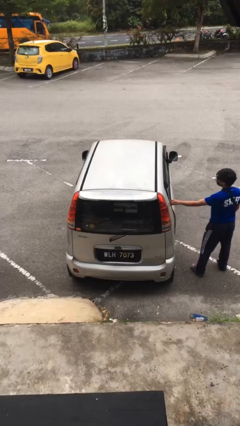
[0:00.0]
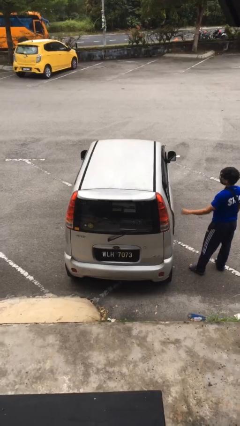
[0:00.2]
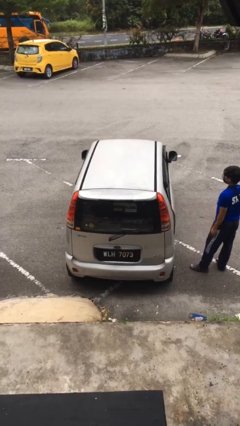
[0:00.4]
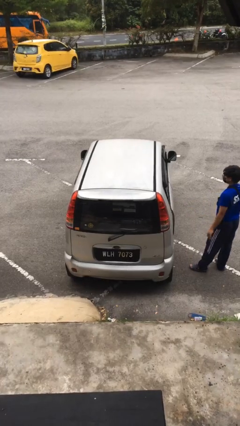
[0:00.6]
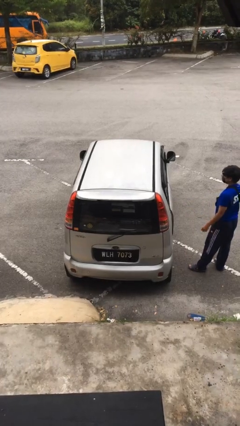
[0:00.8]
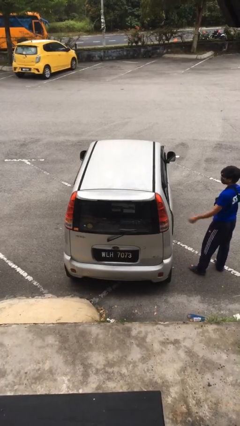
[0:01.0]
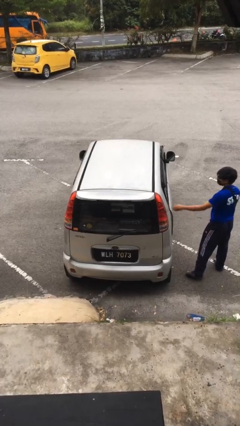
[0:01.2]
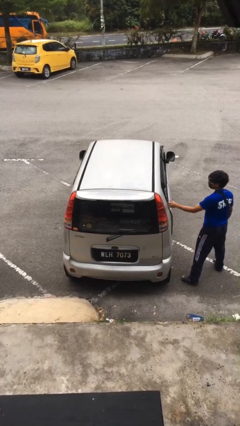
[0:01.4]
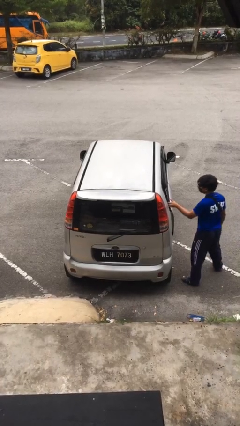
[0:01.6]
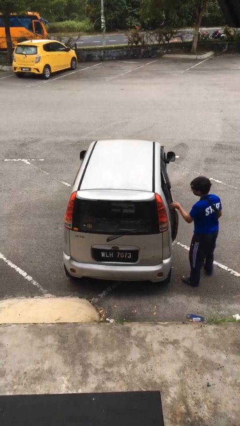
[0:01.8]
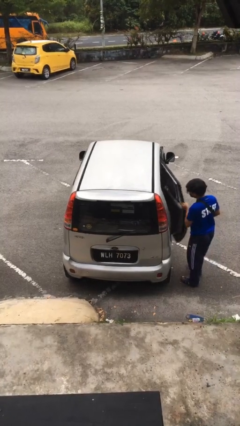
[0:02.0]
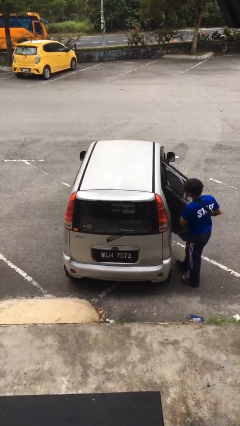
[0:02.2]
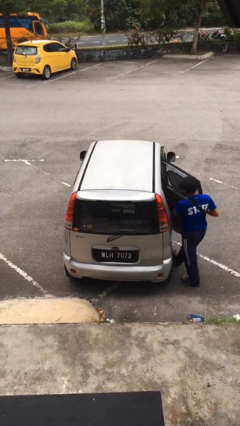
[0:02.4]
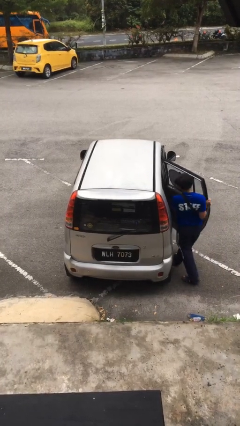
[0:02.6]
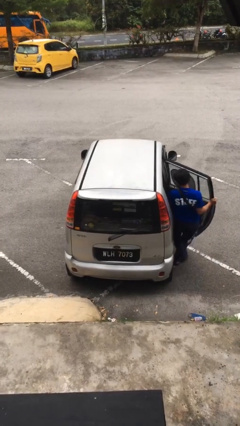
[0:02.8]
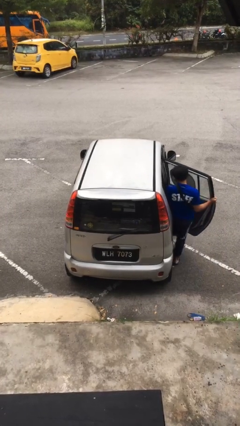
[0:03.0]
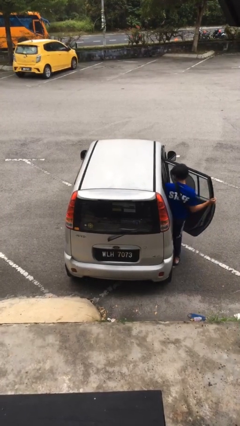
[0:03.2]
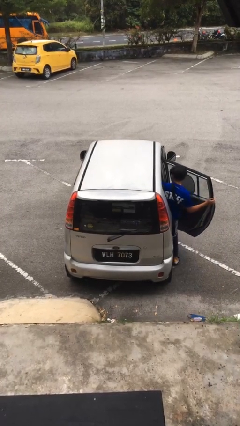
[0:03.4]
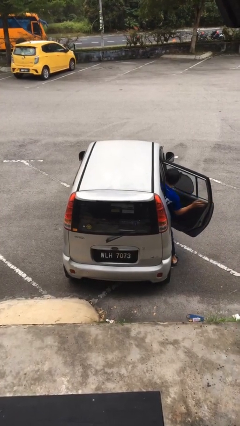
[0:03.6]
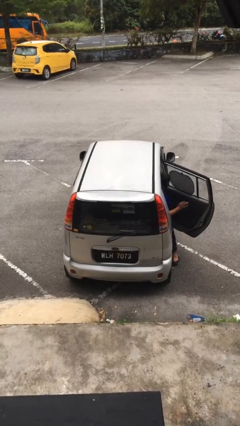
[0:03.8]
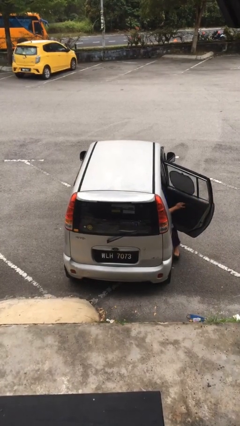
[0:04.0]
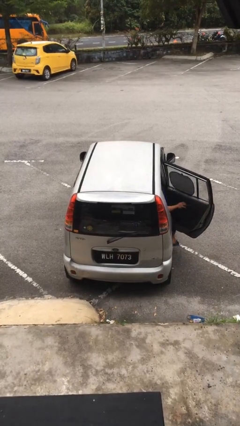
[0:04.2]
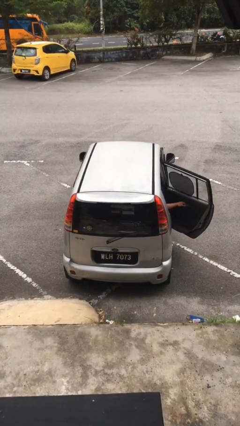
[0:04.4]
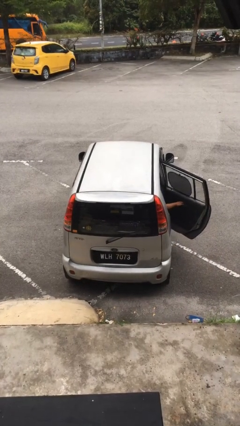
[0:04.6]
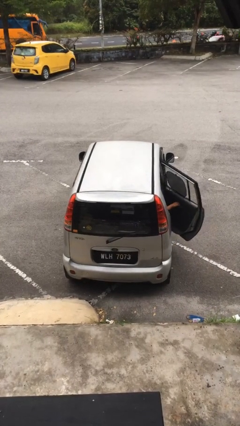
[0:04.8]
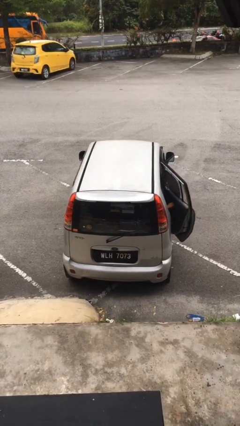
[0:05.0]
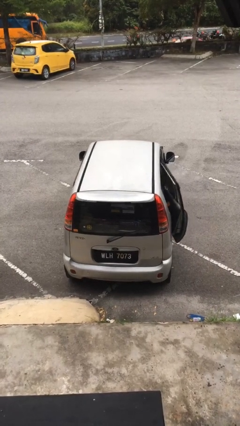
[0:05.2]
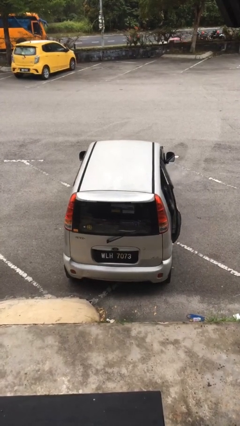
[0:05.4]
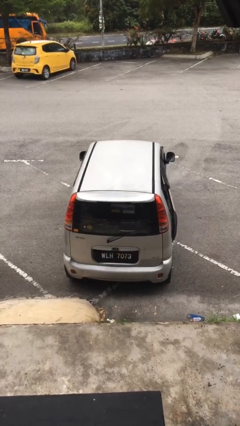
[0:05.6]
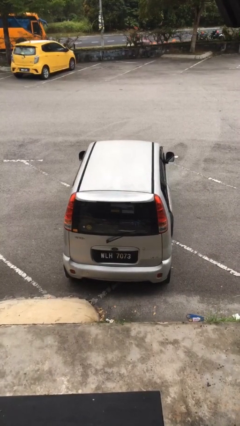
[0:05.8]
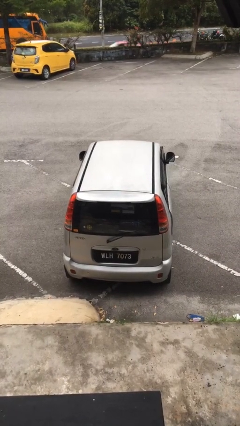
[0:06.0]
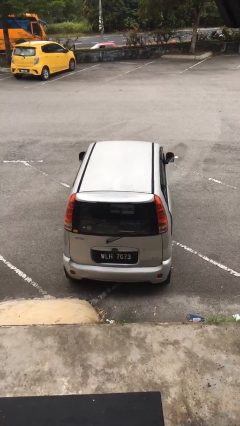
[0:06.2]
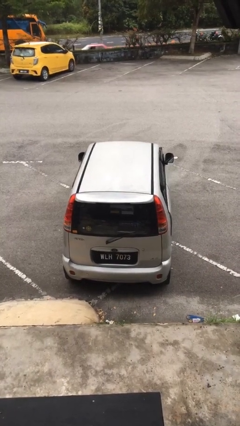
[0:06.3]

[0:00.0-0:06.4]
car picks up person

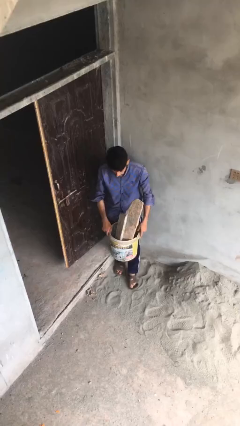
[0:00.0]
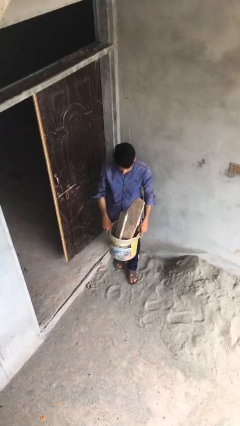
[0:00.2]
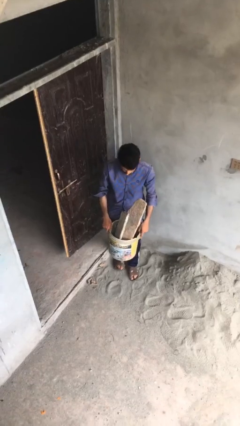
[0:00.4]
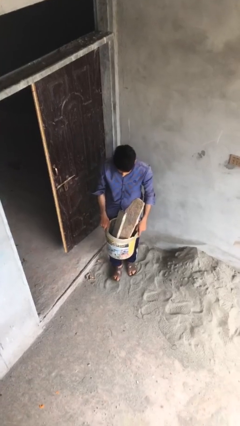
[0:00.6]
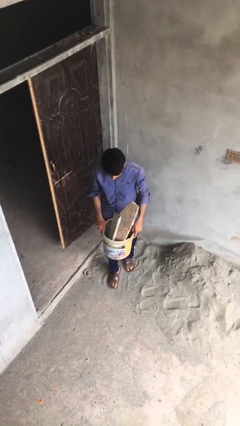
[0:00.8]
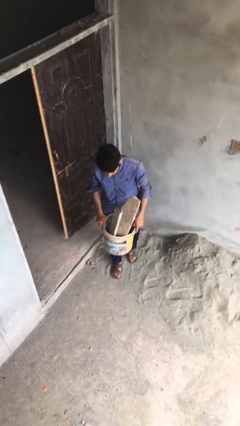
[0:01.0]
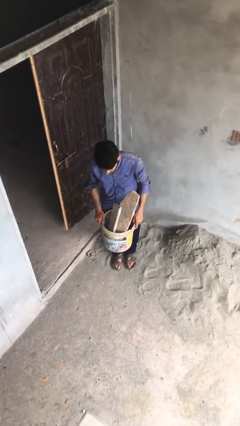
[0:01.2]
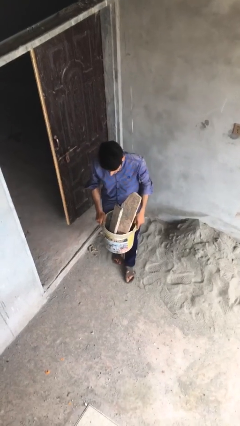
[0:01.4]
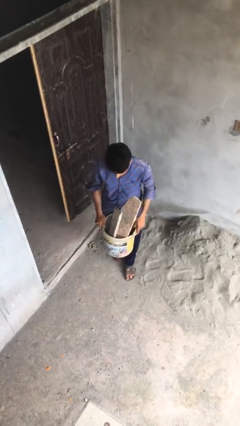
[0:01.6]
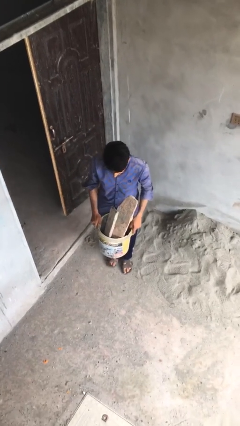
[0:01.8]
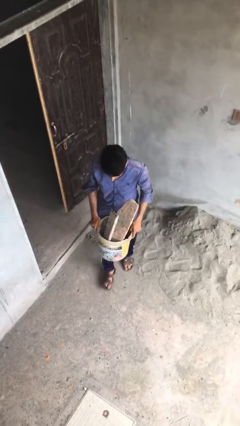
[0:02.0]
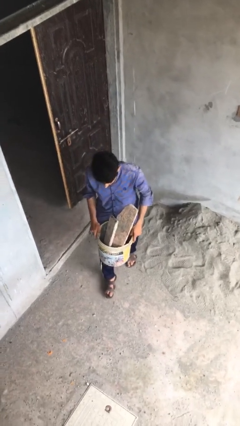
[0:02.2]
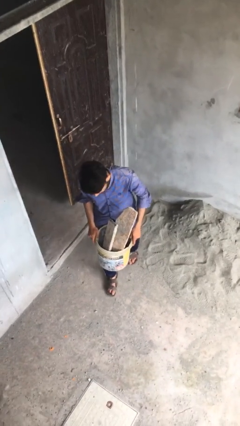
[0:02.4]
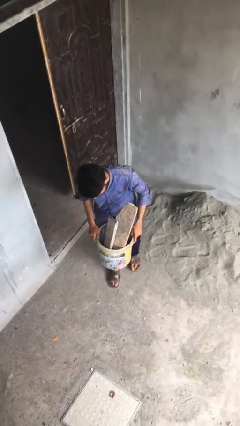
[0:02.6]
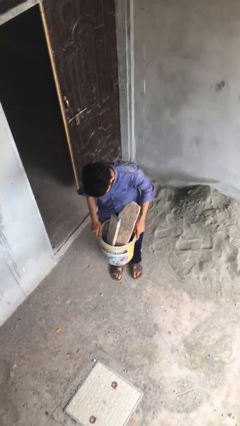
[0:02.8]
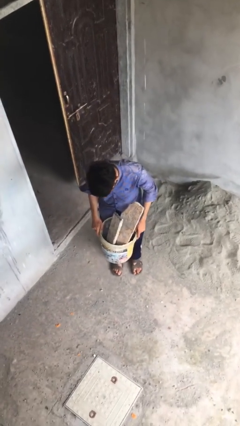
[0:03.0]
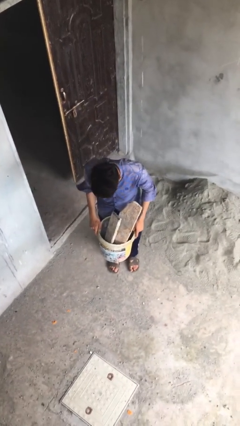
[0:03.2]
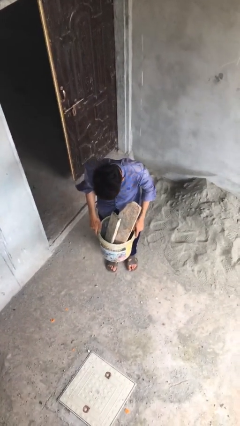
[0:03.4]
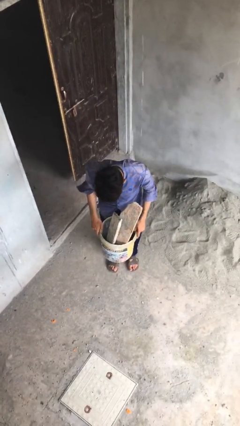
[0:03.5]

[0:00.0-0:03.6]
person carries heavy object

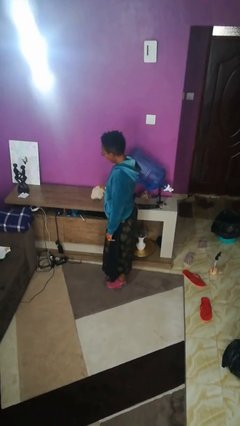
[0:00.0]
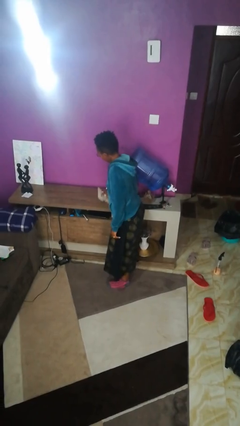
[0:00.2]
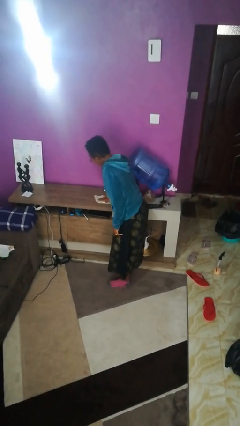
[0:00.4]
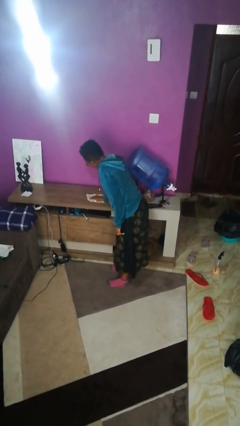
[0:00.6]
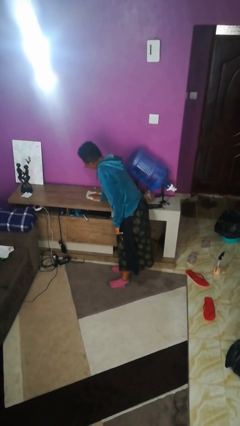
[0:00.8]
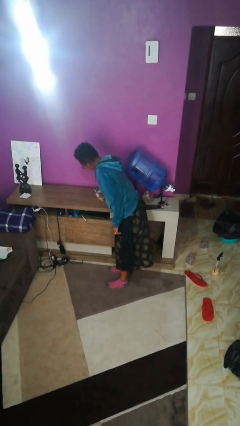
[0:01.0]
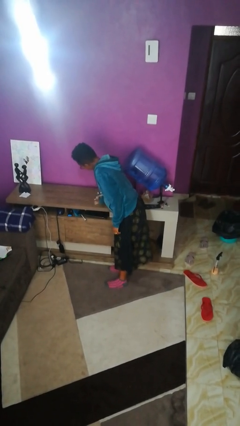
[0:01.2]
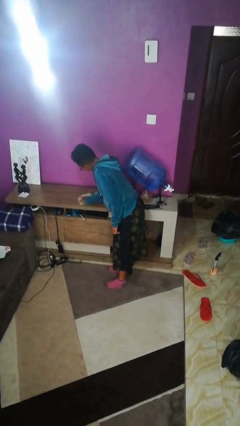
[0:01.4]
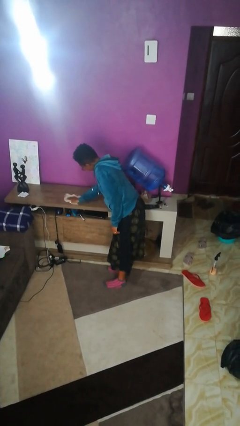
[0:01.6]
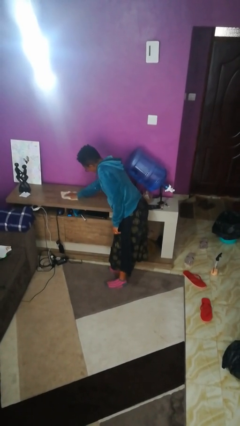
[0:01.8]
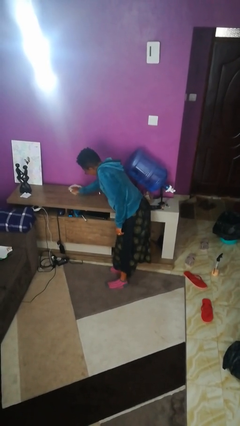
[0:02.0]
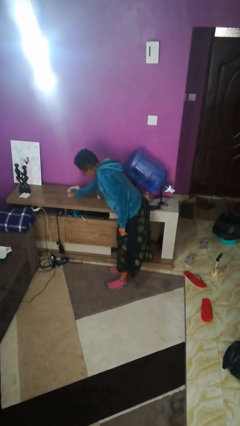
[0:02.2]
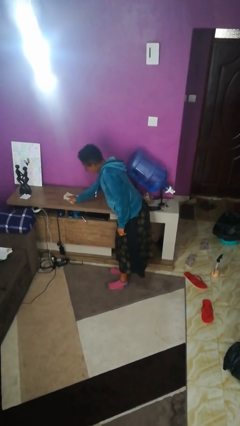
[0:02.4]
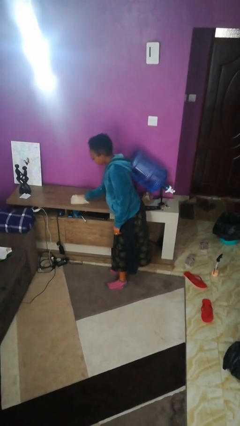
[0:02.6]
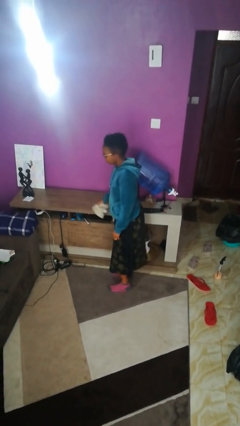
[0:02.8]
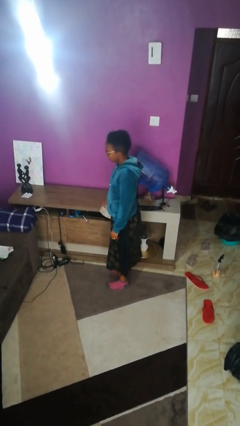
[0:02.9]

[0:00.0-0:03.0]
person cleans table with rag

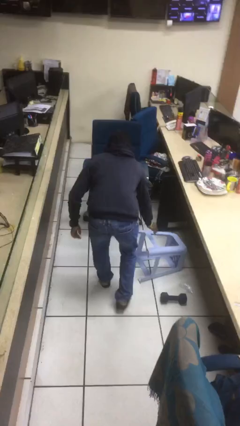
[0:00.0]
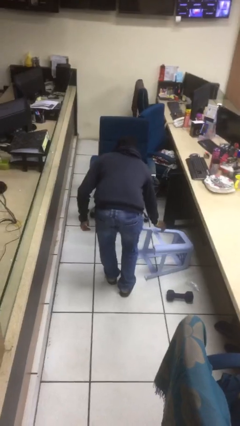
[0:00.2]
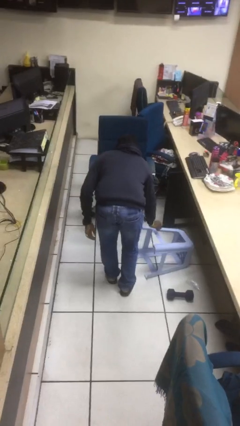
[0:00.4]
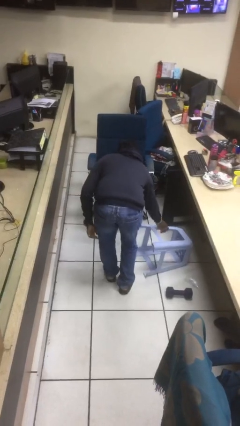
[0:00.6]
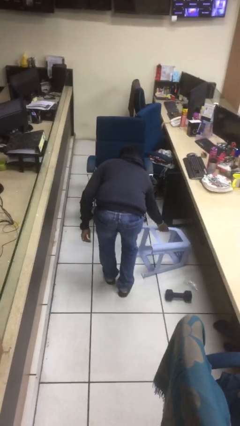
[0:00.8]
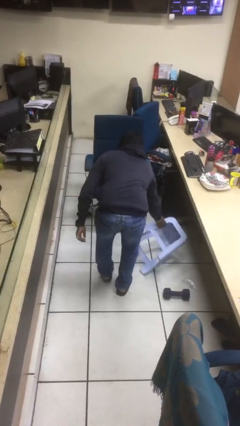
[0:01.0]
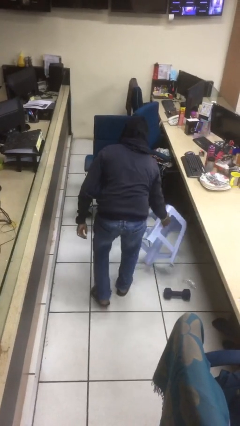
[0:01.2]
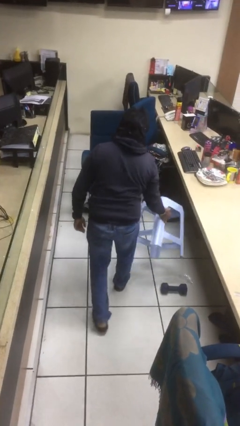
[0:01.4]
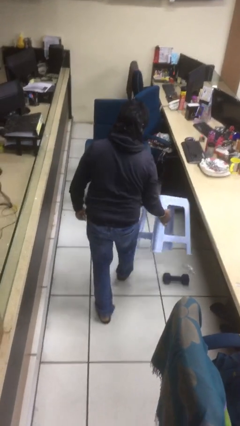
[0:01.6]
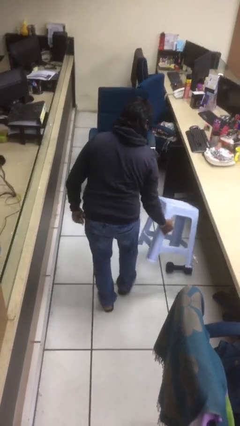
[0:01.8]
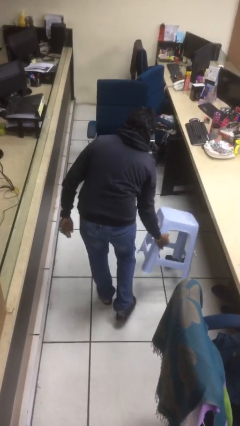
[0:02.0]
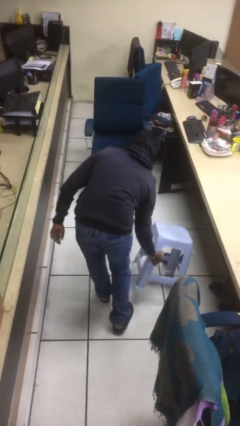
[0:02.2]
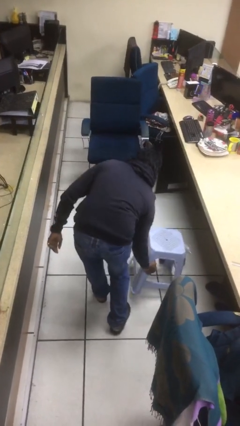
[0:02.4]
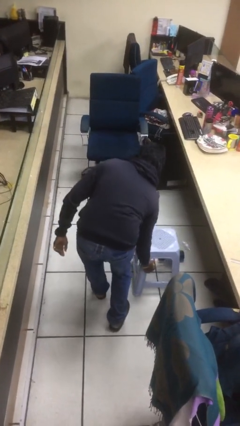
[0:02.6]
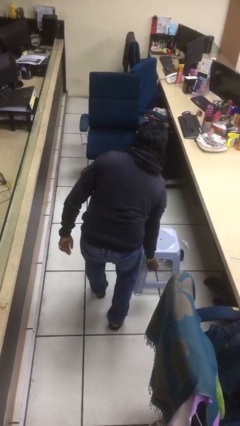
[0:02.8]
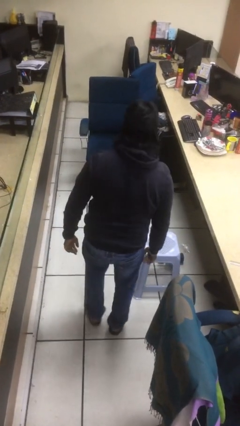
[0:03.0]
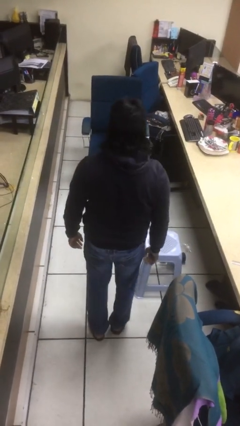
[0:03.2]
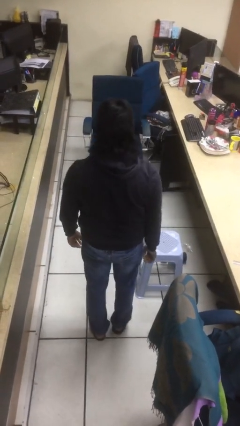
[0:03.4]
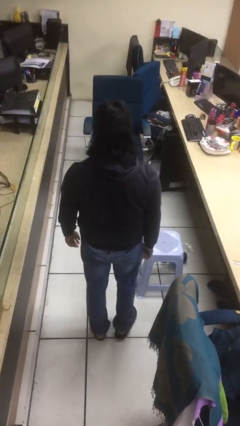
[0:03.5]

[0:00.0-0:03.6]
person sets upright furniture

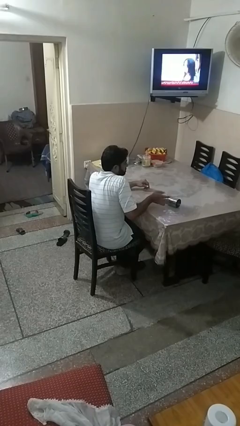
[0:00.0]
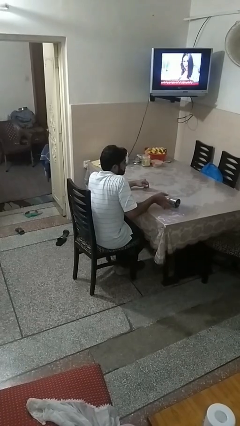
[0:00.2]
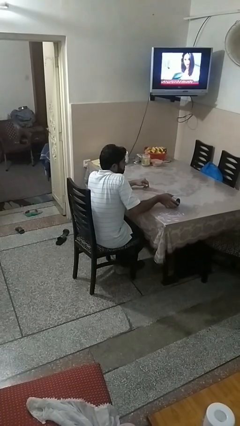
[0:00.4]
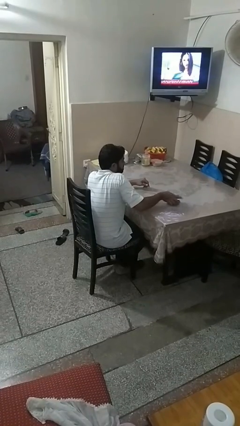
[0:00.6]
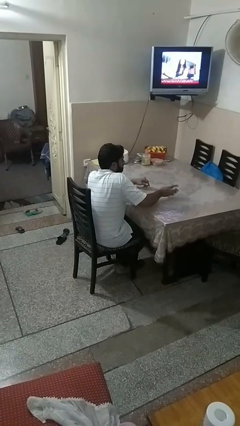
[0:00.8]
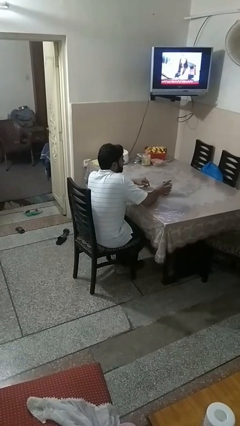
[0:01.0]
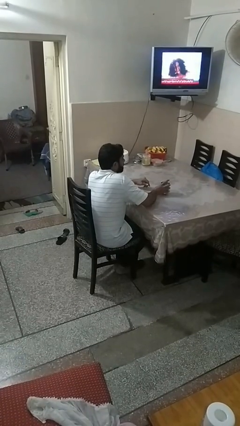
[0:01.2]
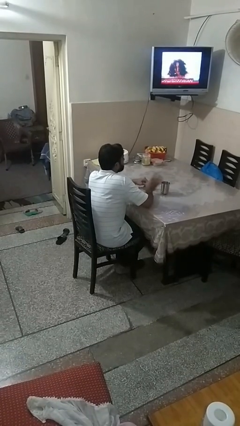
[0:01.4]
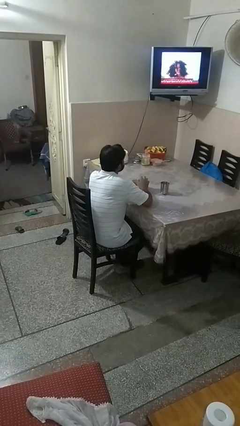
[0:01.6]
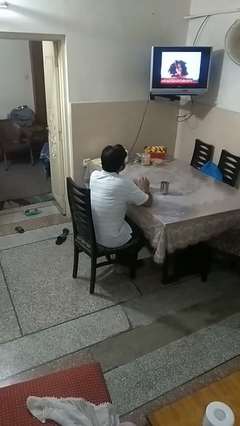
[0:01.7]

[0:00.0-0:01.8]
person sets upright glass
